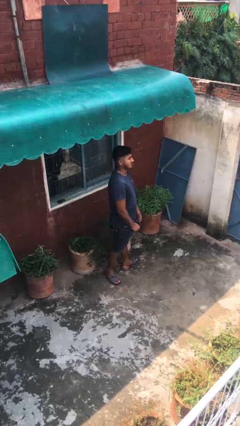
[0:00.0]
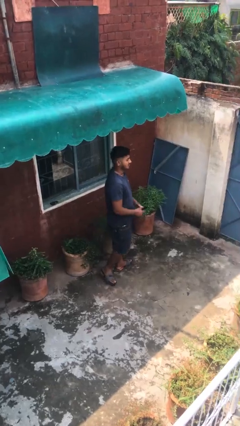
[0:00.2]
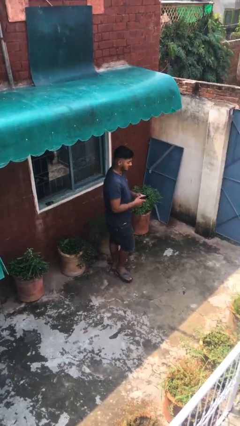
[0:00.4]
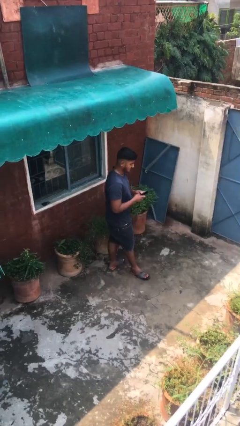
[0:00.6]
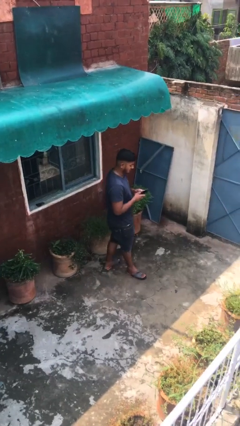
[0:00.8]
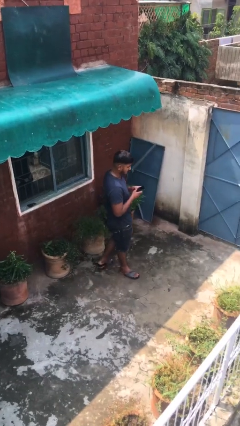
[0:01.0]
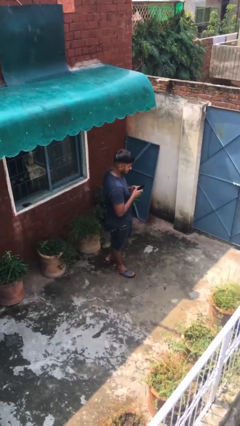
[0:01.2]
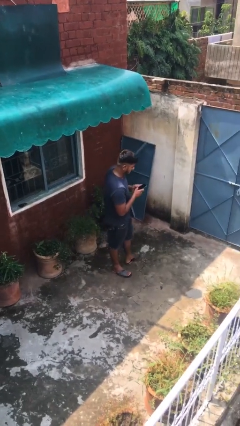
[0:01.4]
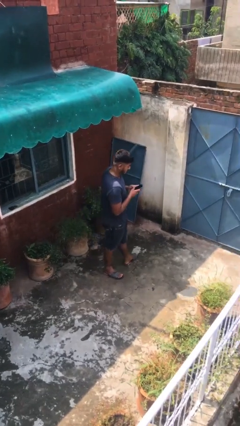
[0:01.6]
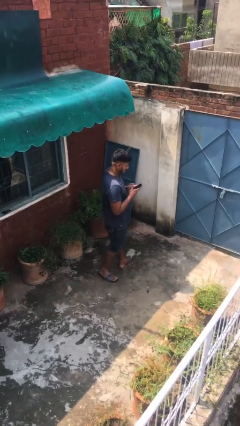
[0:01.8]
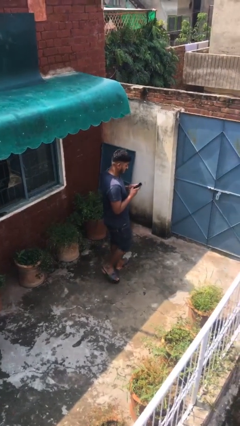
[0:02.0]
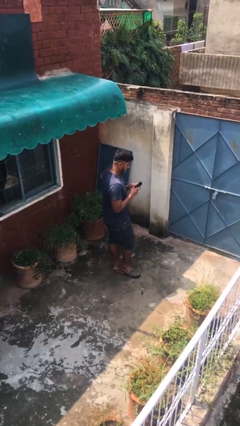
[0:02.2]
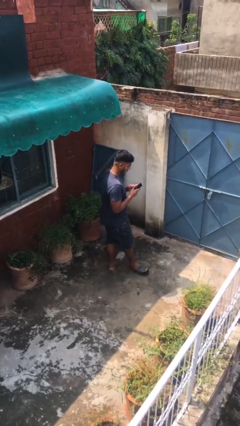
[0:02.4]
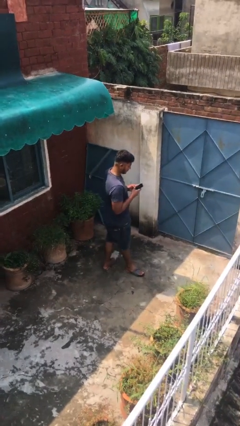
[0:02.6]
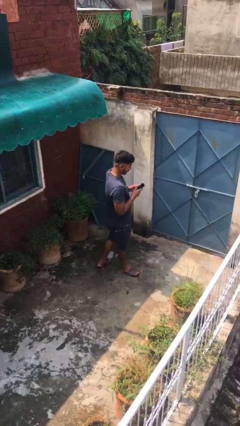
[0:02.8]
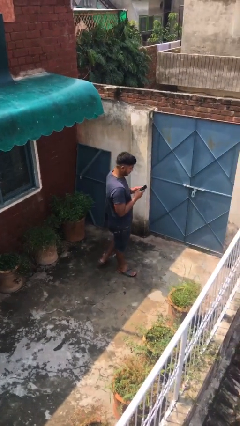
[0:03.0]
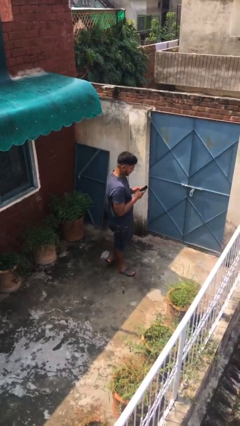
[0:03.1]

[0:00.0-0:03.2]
person texts on phone

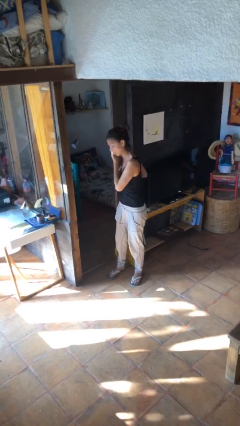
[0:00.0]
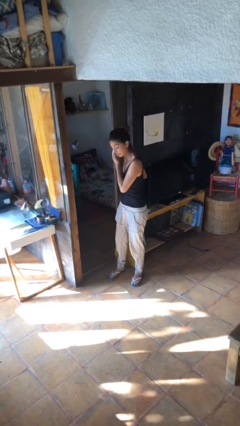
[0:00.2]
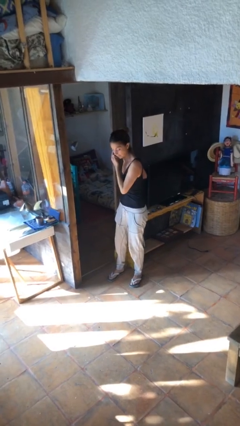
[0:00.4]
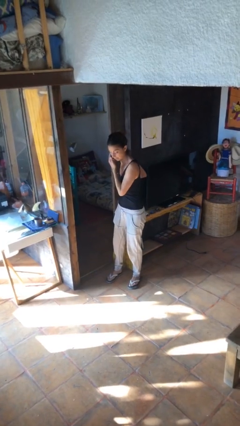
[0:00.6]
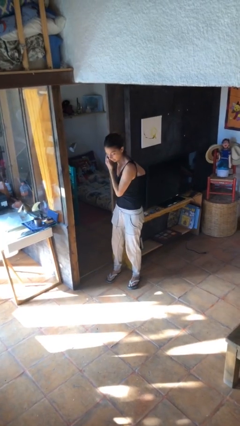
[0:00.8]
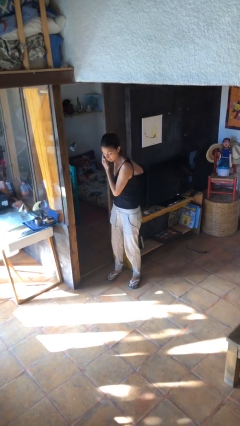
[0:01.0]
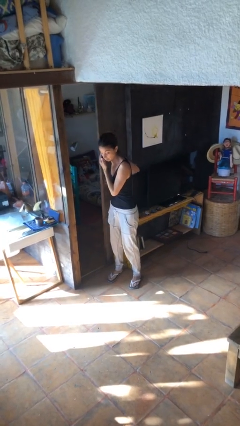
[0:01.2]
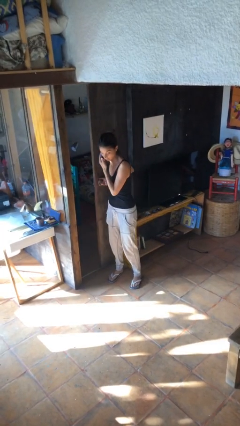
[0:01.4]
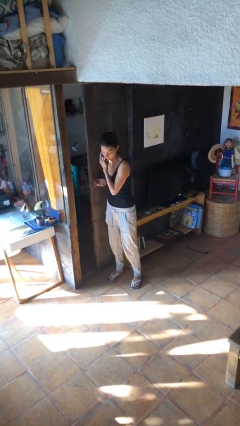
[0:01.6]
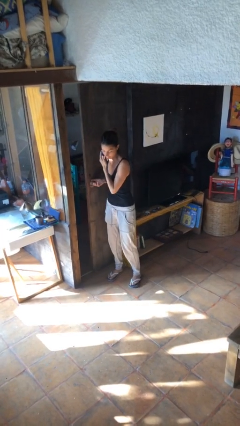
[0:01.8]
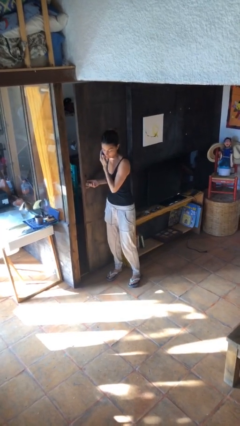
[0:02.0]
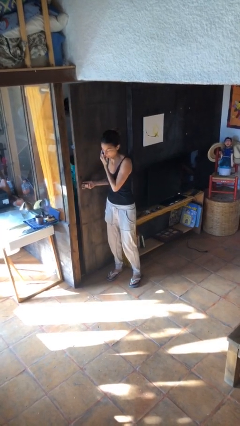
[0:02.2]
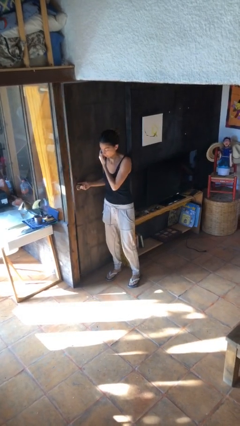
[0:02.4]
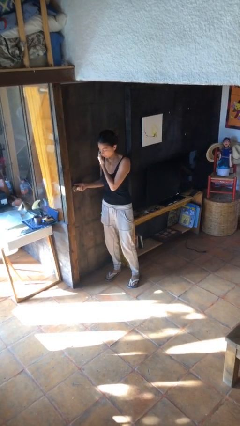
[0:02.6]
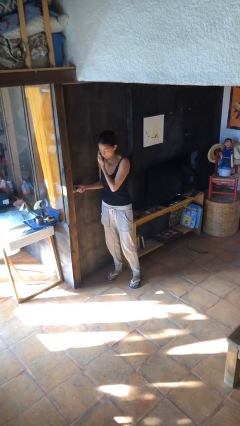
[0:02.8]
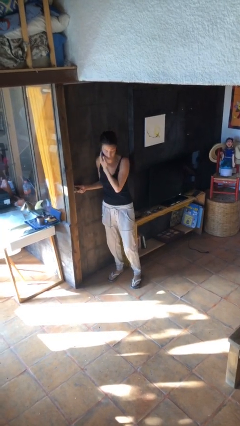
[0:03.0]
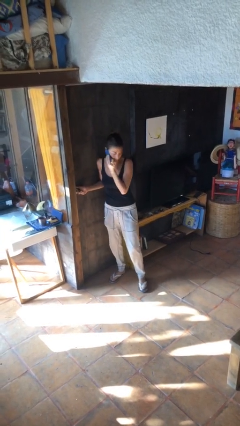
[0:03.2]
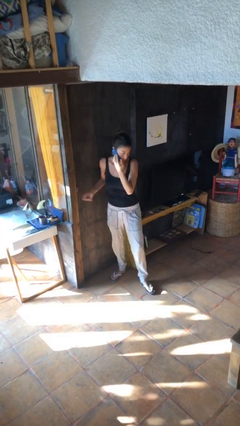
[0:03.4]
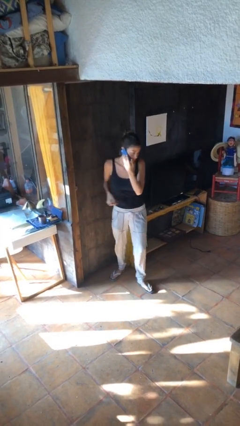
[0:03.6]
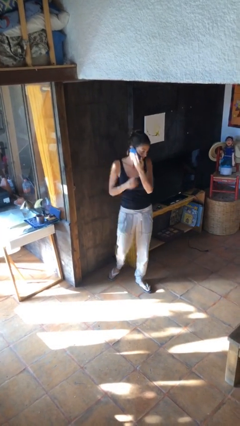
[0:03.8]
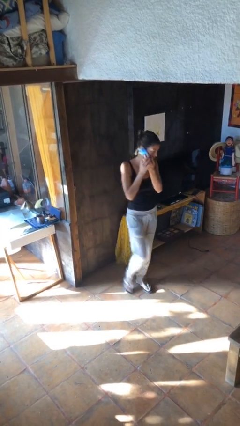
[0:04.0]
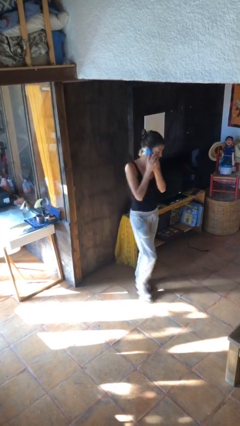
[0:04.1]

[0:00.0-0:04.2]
person closes facility door

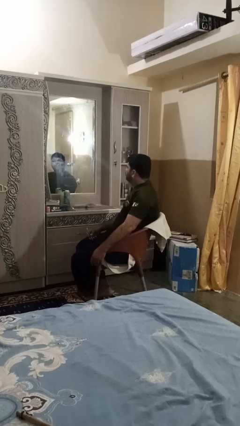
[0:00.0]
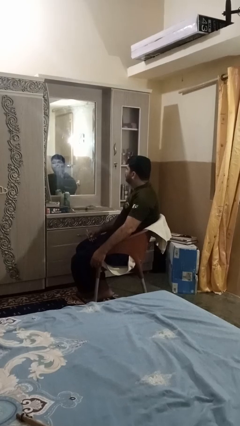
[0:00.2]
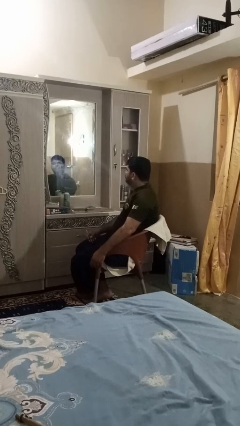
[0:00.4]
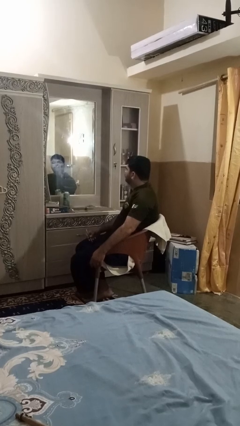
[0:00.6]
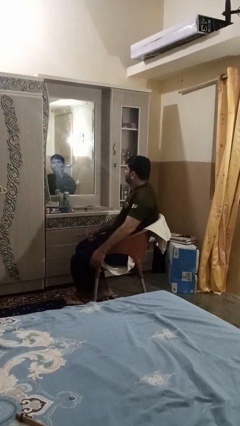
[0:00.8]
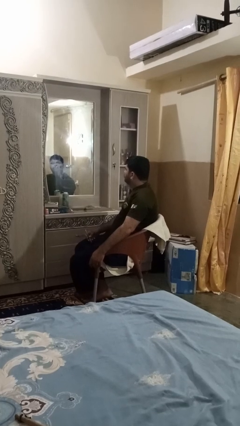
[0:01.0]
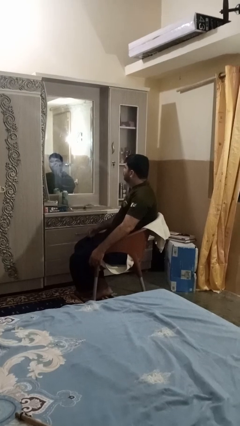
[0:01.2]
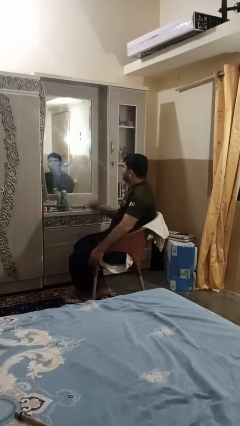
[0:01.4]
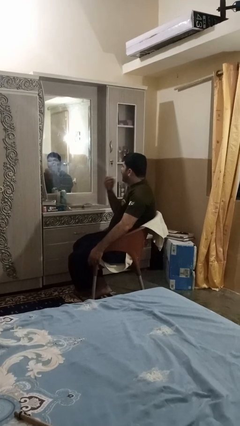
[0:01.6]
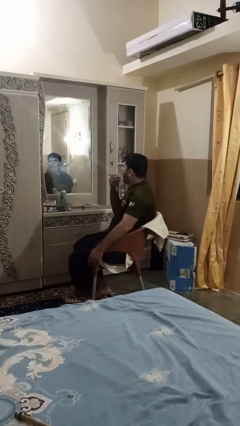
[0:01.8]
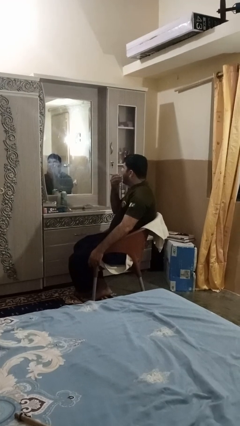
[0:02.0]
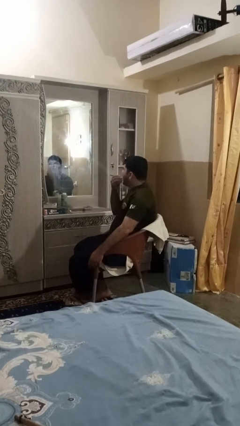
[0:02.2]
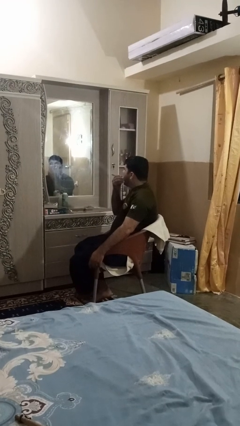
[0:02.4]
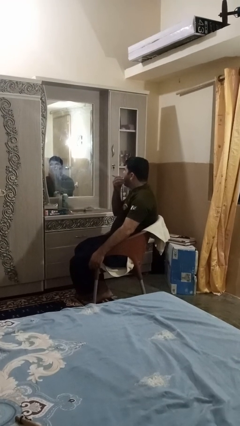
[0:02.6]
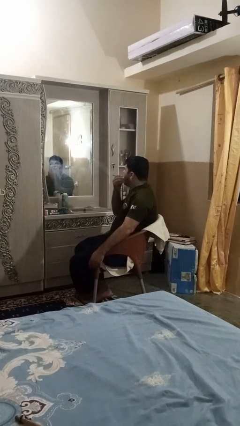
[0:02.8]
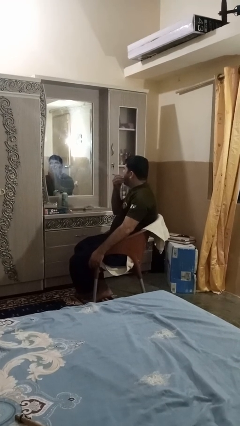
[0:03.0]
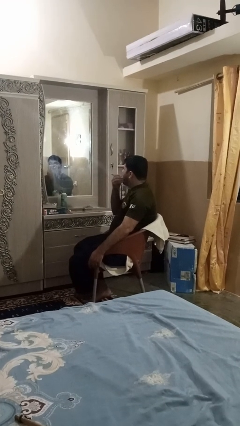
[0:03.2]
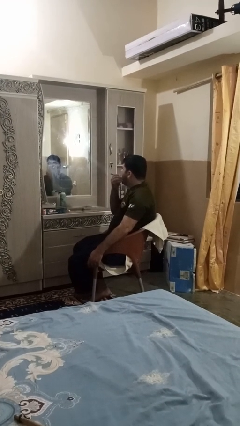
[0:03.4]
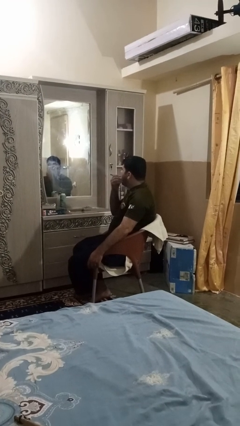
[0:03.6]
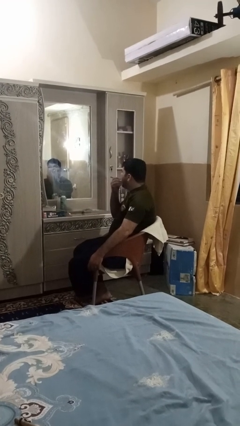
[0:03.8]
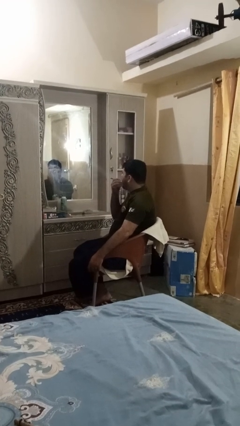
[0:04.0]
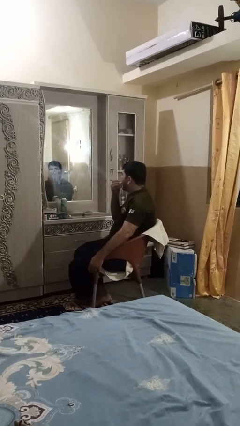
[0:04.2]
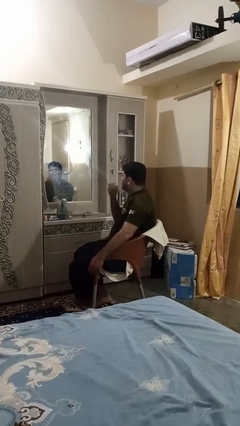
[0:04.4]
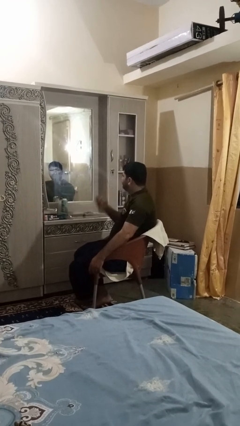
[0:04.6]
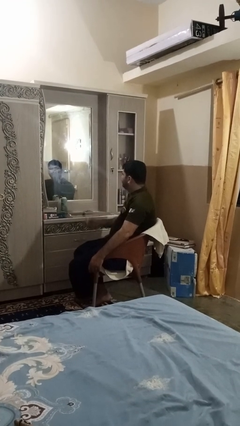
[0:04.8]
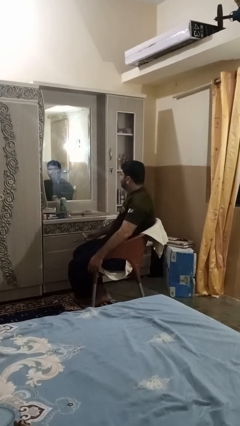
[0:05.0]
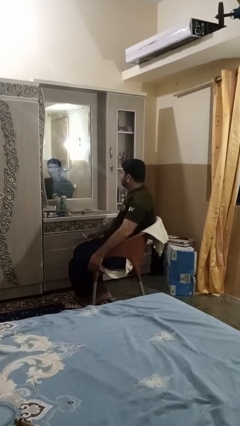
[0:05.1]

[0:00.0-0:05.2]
person flosses

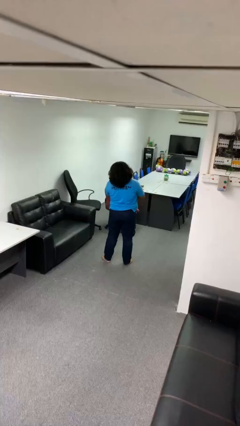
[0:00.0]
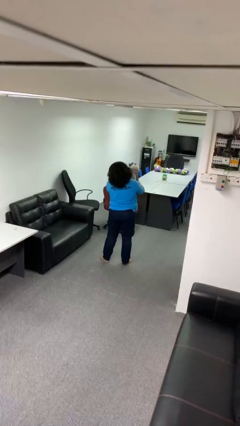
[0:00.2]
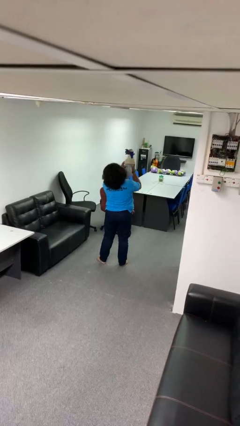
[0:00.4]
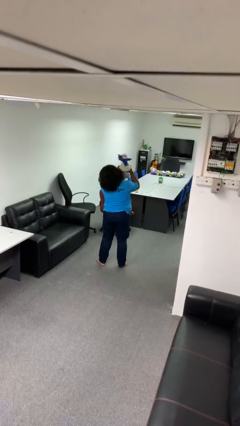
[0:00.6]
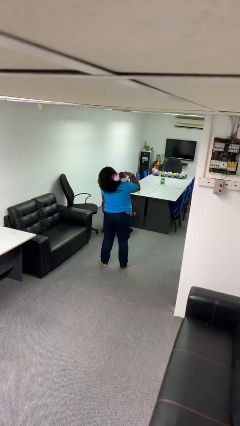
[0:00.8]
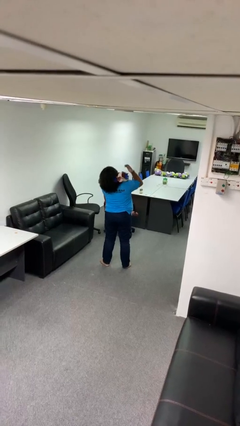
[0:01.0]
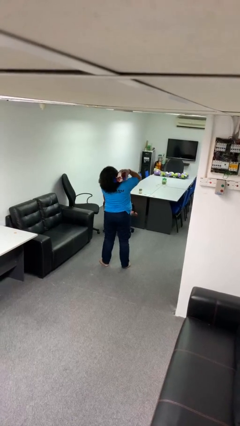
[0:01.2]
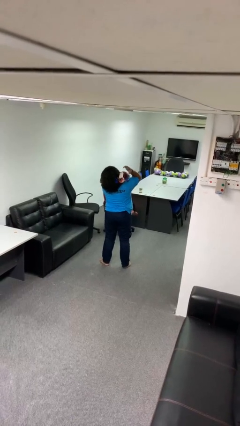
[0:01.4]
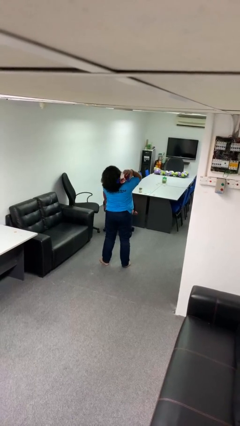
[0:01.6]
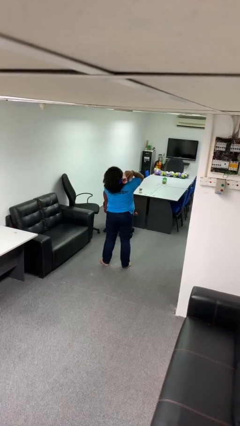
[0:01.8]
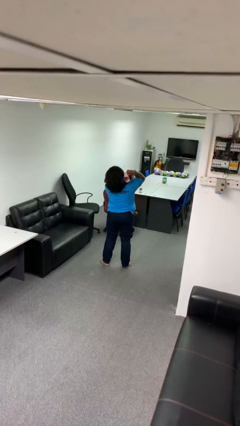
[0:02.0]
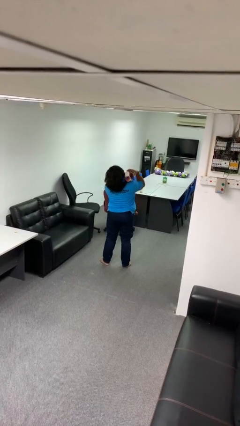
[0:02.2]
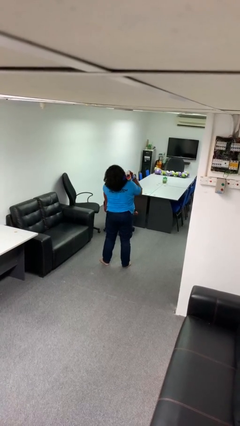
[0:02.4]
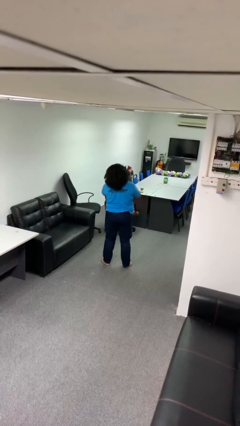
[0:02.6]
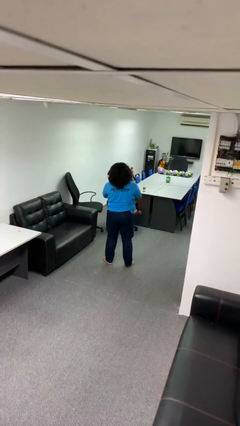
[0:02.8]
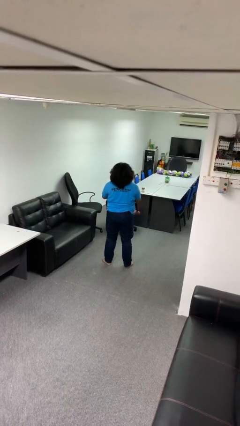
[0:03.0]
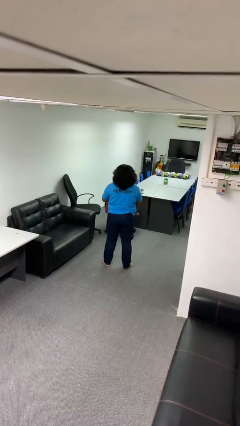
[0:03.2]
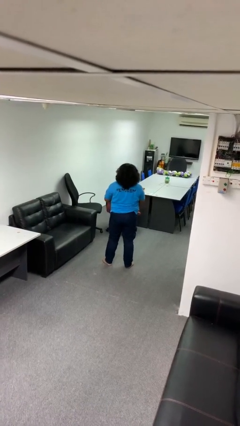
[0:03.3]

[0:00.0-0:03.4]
person hugs stuffed animal

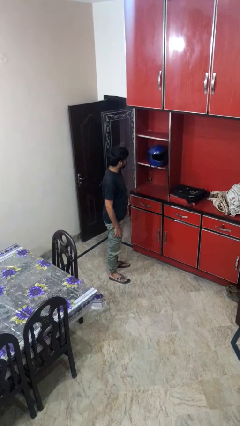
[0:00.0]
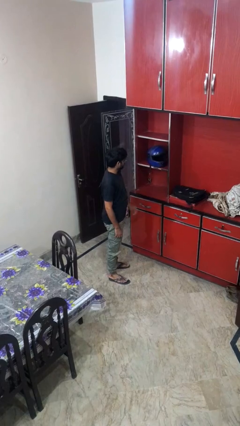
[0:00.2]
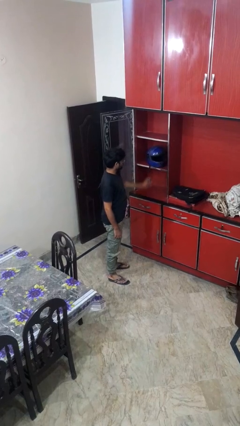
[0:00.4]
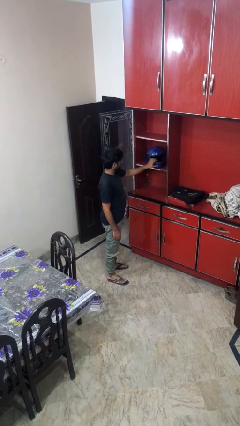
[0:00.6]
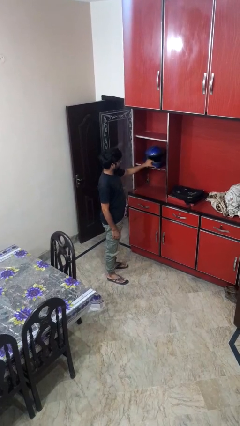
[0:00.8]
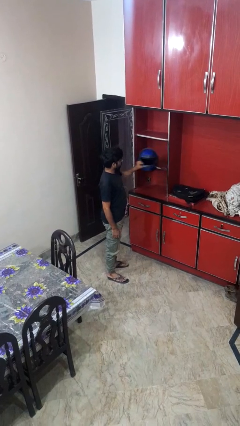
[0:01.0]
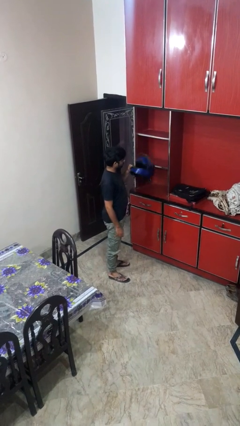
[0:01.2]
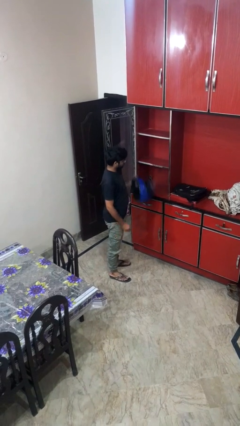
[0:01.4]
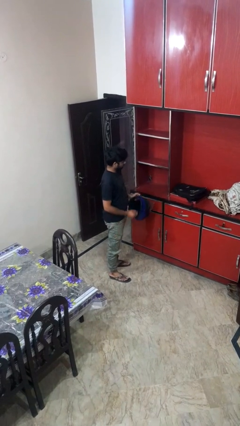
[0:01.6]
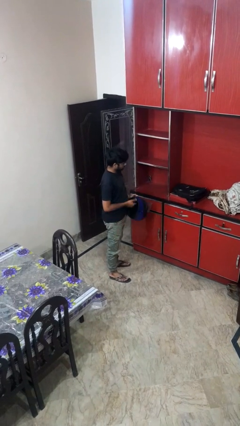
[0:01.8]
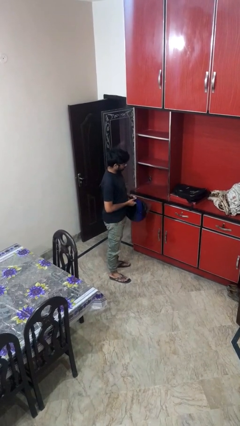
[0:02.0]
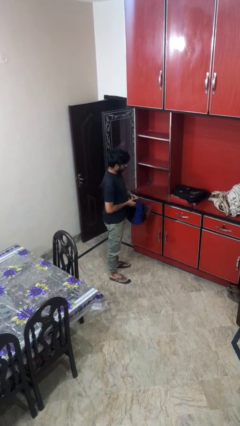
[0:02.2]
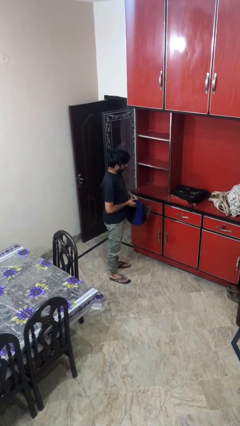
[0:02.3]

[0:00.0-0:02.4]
person picks up object from shelf
